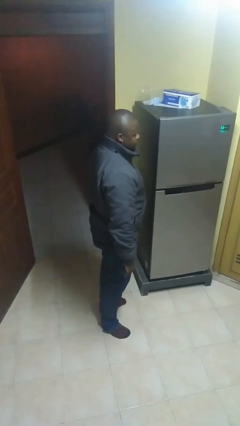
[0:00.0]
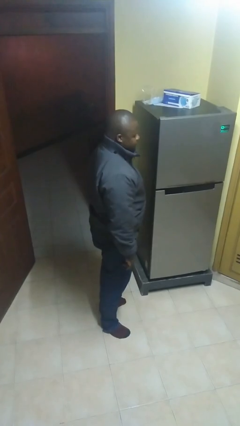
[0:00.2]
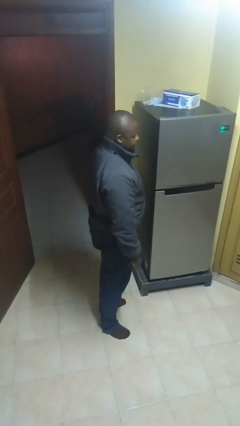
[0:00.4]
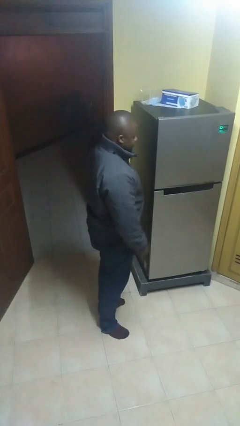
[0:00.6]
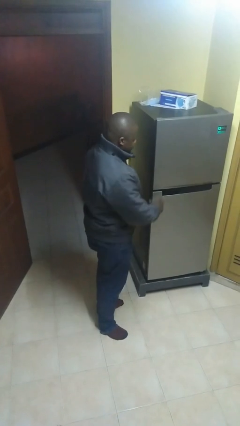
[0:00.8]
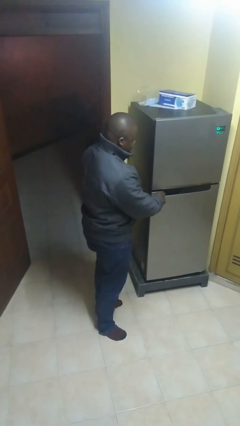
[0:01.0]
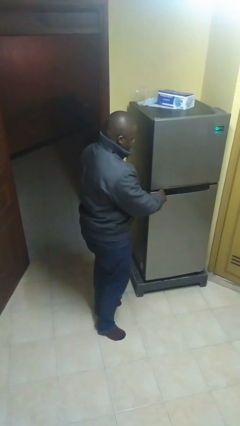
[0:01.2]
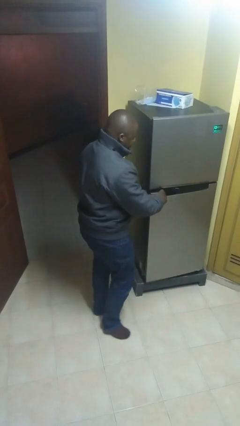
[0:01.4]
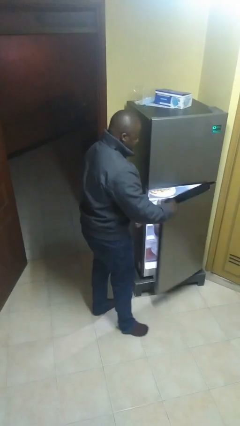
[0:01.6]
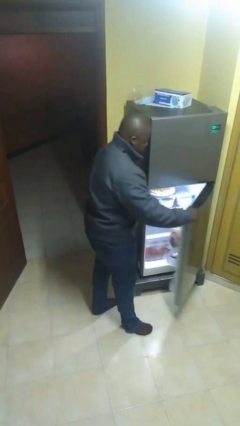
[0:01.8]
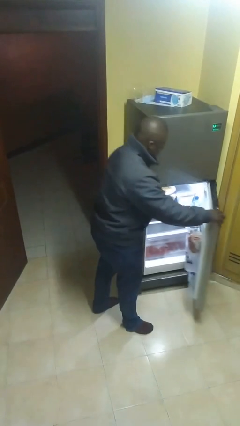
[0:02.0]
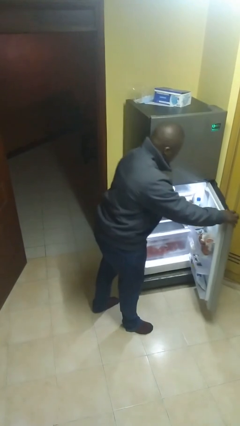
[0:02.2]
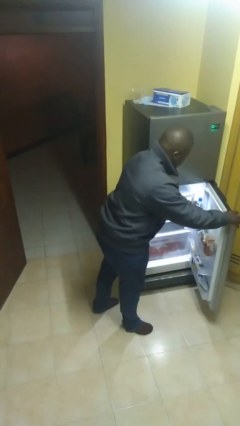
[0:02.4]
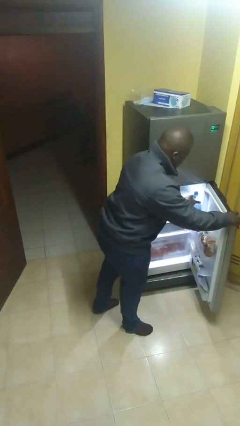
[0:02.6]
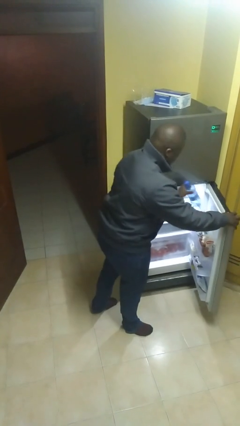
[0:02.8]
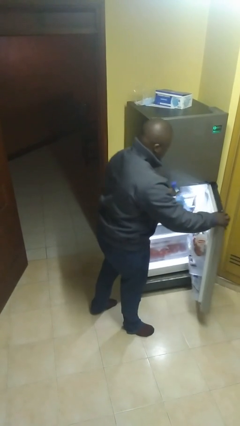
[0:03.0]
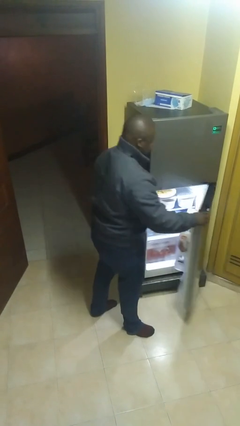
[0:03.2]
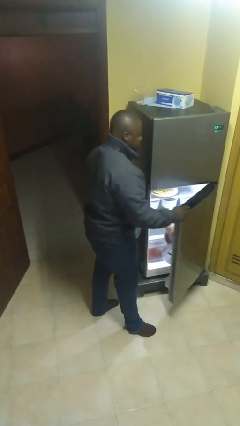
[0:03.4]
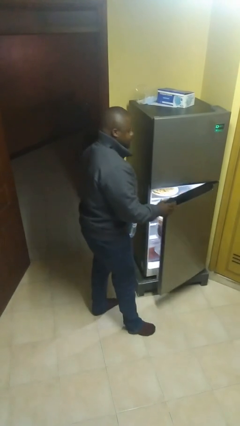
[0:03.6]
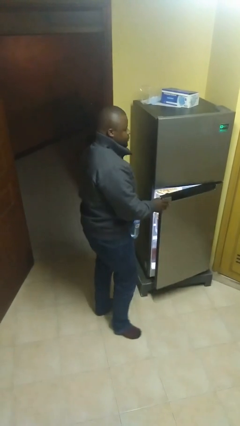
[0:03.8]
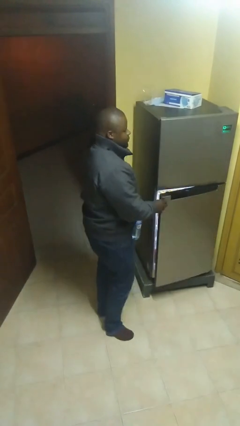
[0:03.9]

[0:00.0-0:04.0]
person takes object from refrigerator

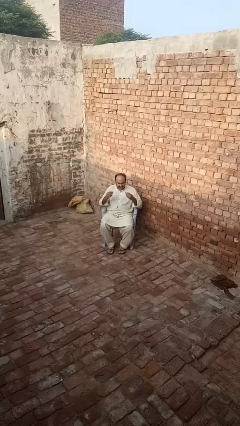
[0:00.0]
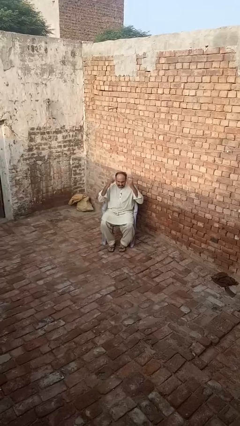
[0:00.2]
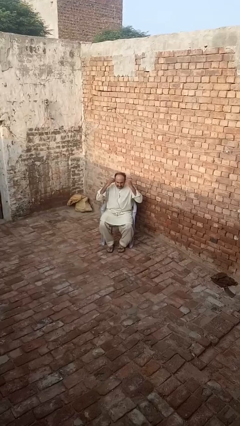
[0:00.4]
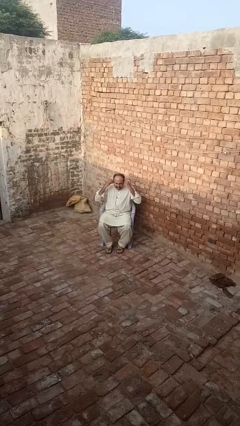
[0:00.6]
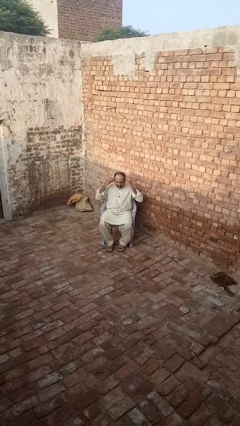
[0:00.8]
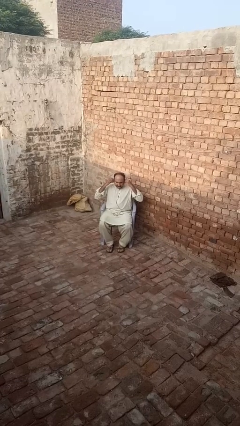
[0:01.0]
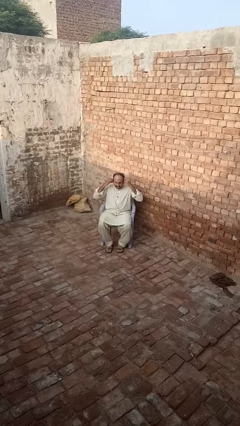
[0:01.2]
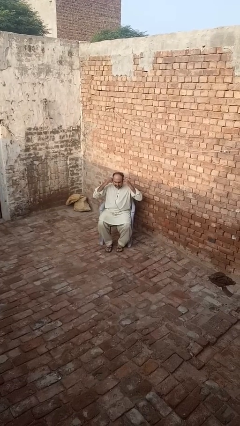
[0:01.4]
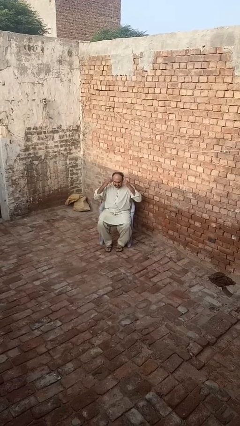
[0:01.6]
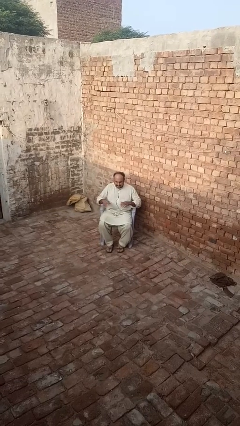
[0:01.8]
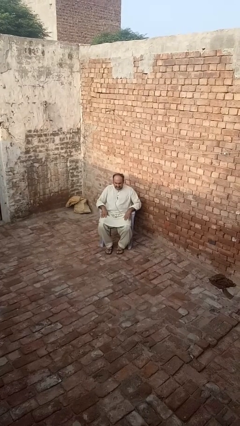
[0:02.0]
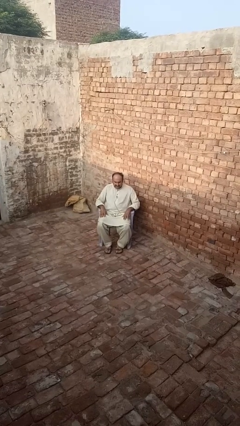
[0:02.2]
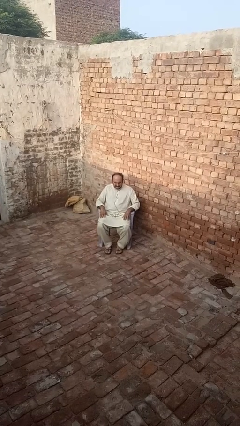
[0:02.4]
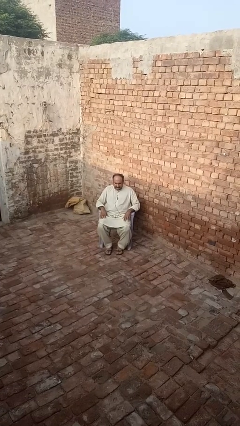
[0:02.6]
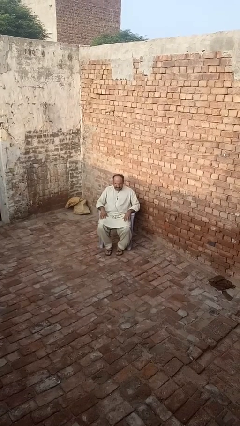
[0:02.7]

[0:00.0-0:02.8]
person puts on headphones

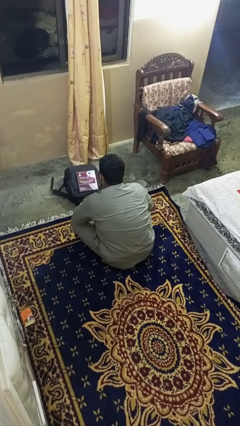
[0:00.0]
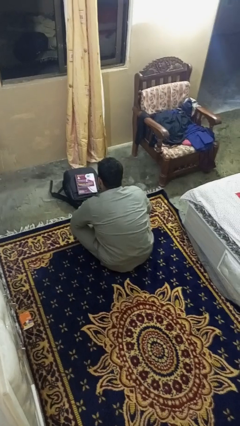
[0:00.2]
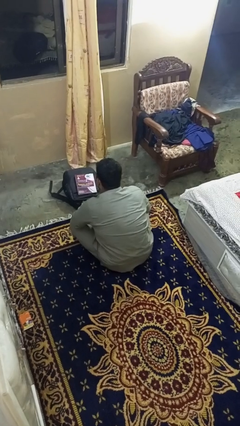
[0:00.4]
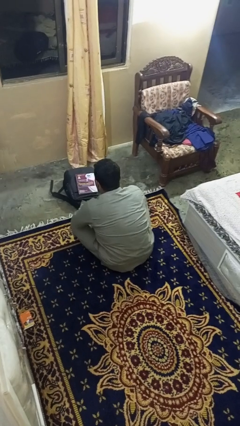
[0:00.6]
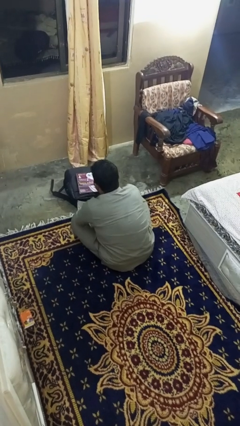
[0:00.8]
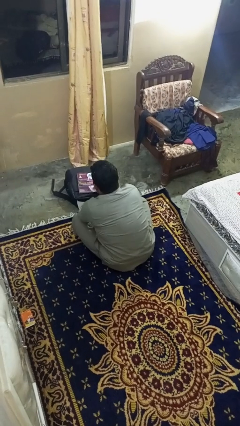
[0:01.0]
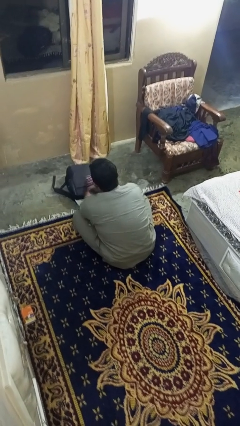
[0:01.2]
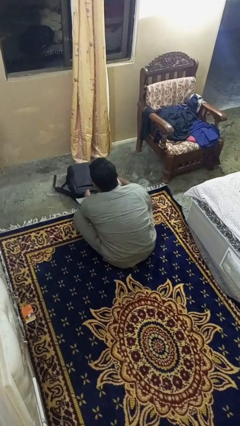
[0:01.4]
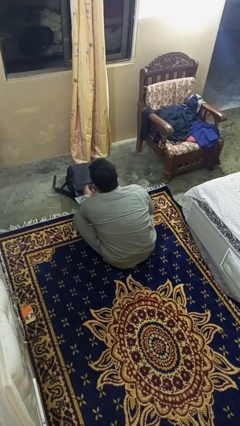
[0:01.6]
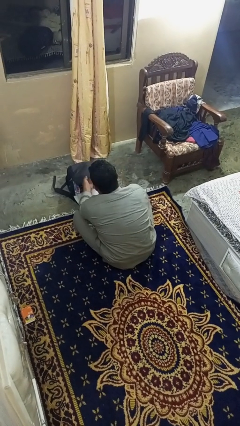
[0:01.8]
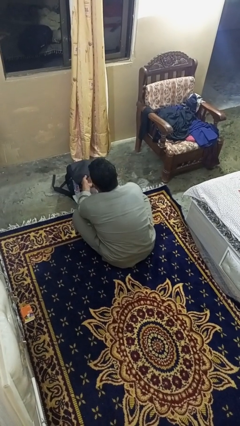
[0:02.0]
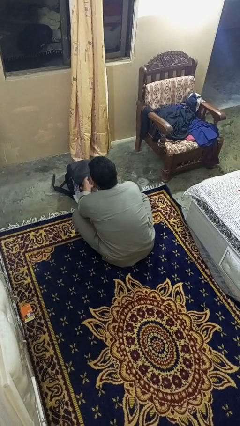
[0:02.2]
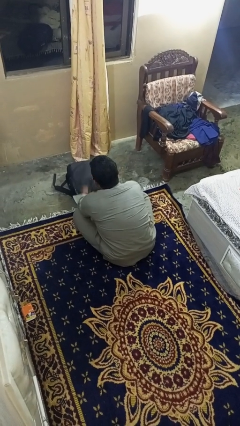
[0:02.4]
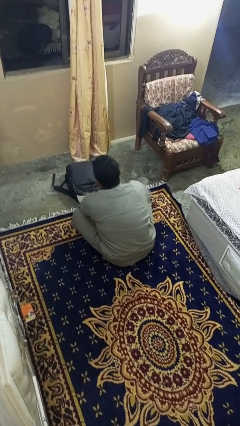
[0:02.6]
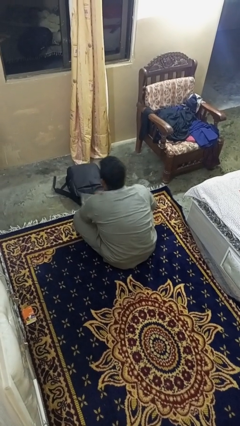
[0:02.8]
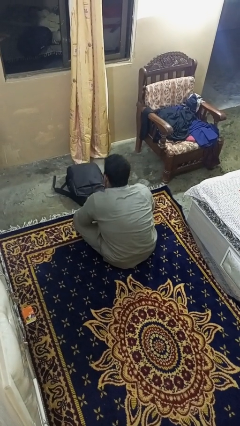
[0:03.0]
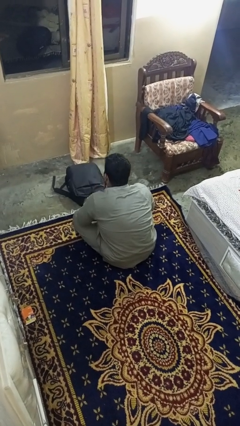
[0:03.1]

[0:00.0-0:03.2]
person puts object into bag

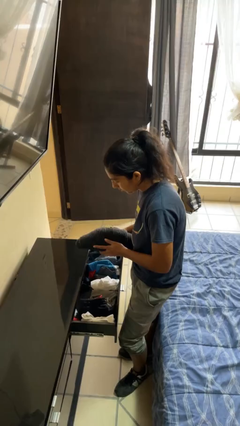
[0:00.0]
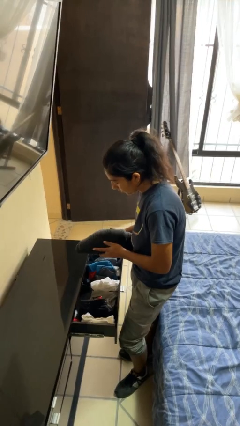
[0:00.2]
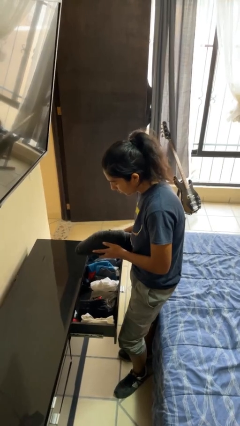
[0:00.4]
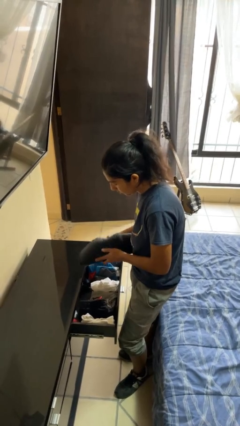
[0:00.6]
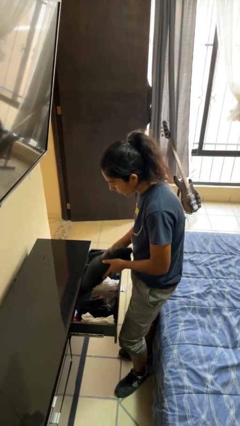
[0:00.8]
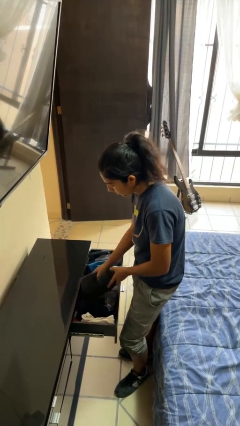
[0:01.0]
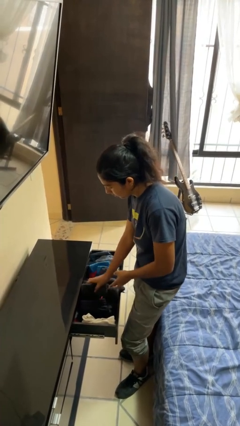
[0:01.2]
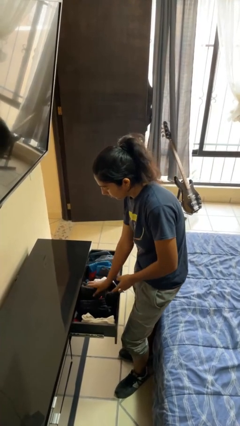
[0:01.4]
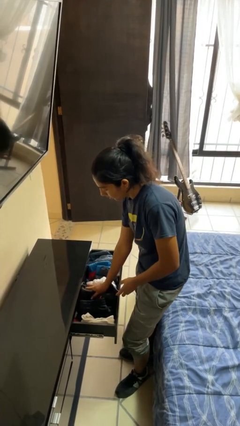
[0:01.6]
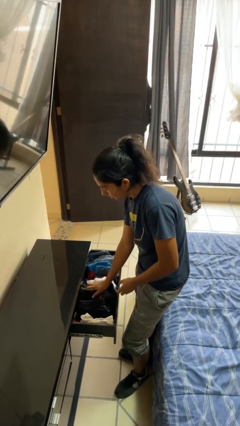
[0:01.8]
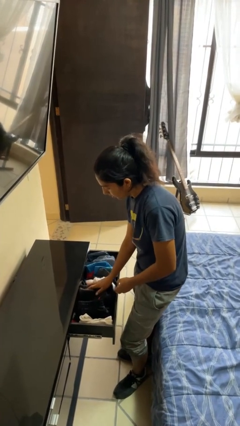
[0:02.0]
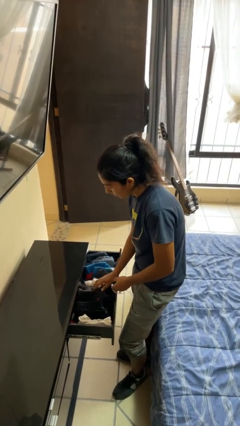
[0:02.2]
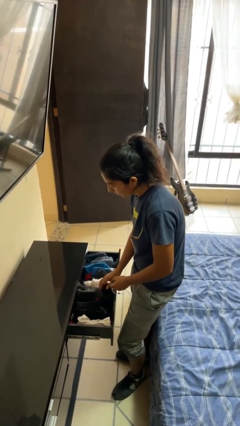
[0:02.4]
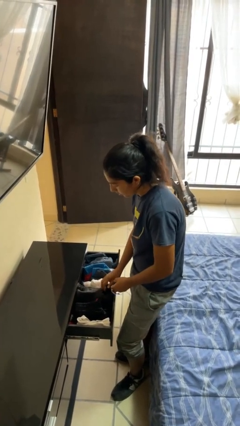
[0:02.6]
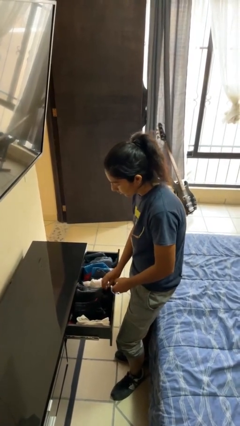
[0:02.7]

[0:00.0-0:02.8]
person puts clothes into dresser

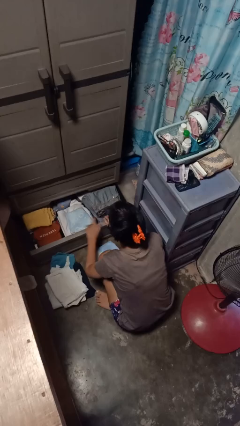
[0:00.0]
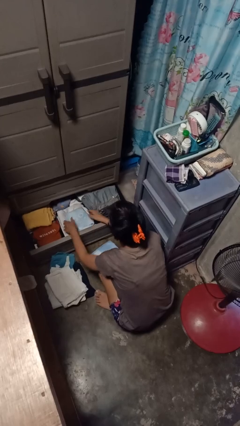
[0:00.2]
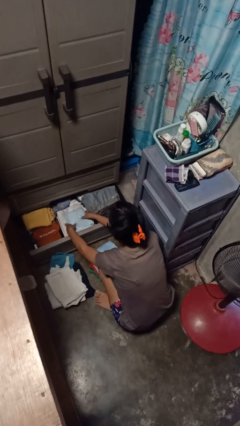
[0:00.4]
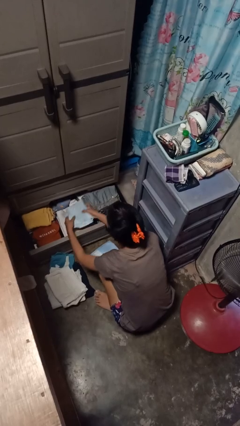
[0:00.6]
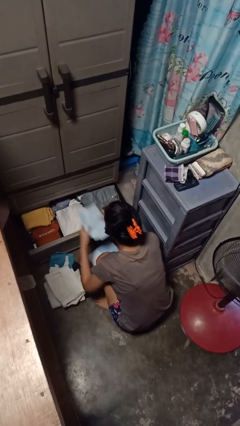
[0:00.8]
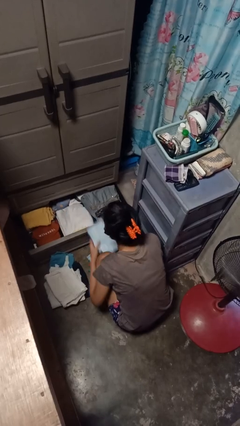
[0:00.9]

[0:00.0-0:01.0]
person takes clothes from dresser

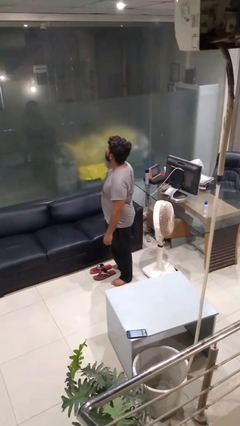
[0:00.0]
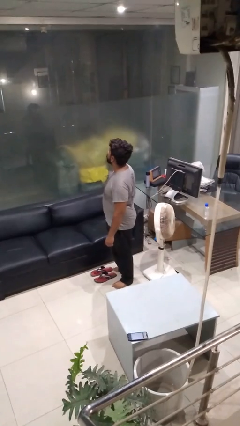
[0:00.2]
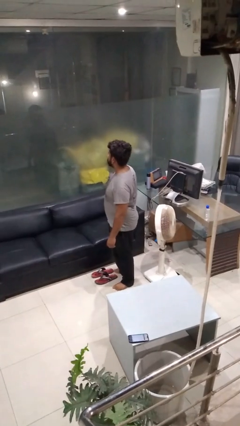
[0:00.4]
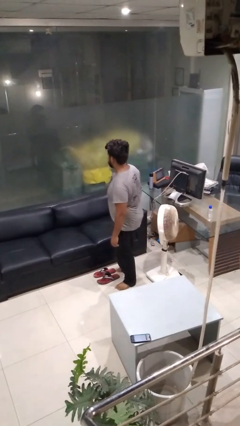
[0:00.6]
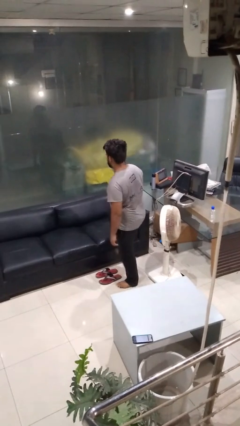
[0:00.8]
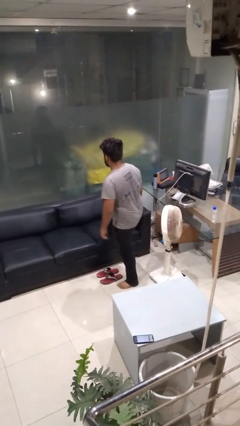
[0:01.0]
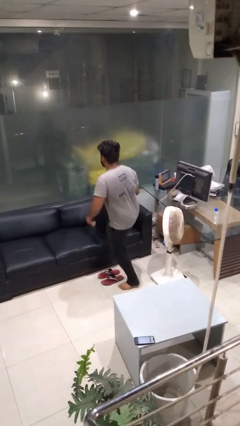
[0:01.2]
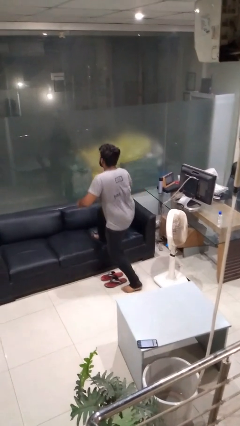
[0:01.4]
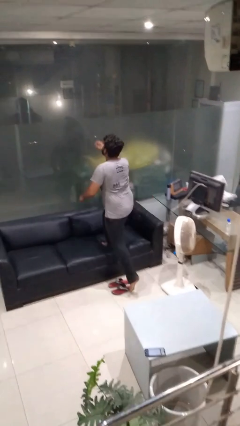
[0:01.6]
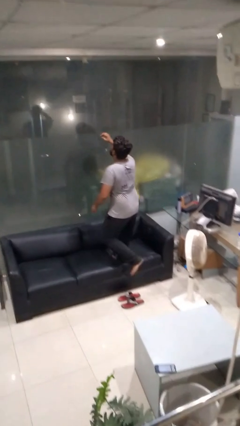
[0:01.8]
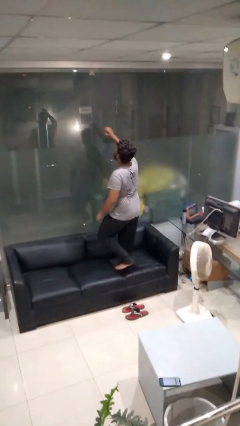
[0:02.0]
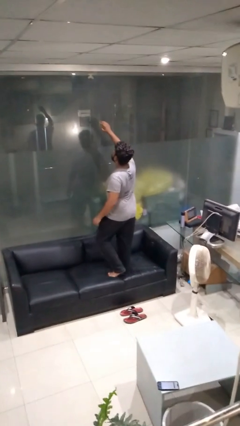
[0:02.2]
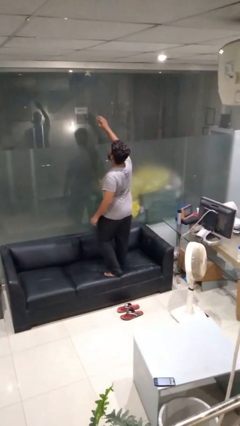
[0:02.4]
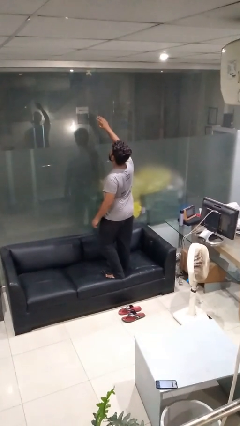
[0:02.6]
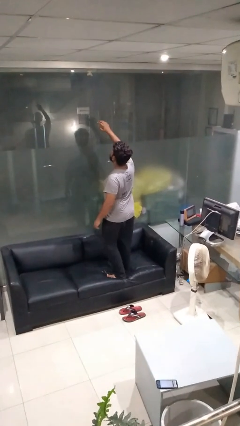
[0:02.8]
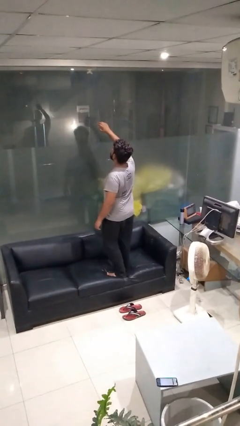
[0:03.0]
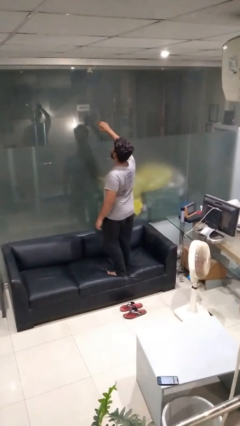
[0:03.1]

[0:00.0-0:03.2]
person climbs on couch

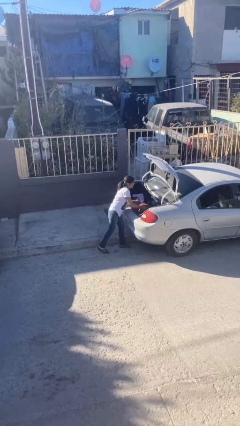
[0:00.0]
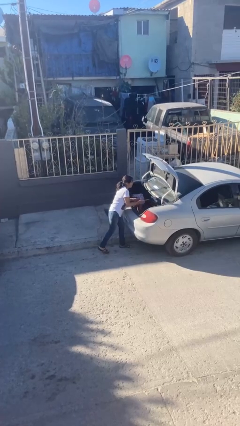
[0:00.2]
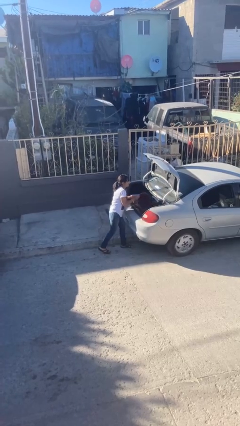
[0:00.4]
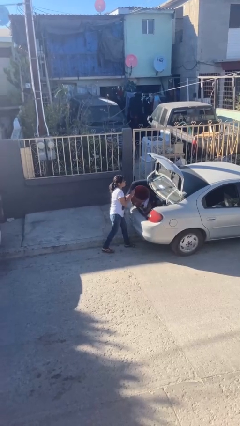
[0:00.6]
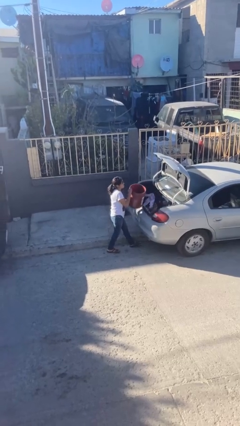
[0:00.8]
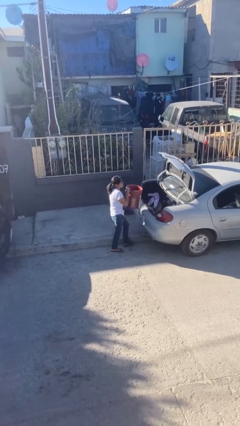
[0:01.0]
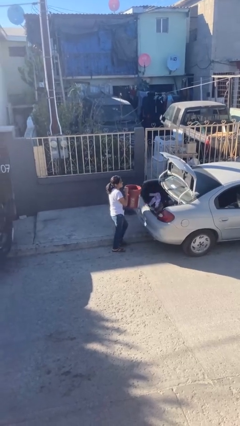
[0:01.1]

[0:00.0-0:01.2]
person unloads car
